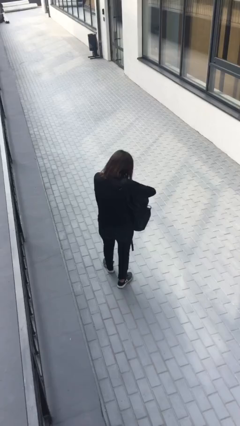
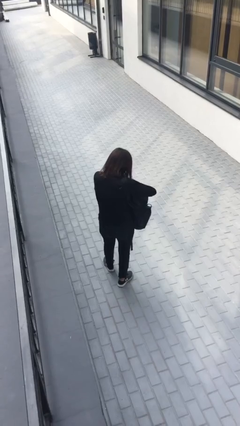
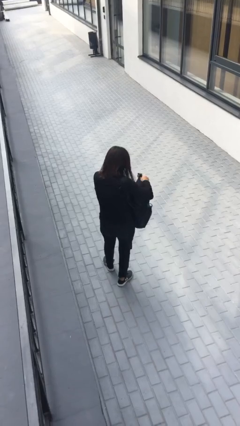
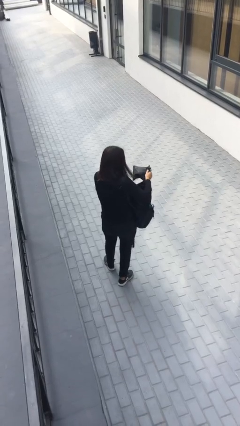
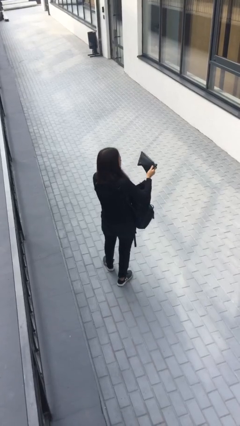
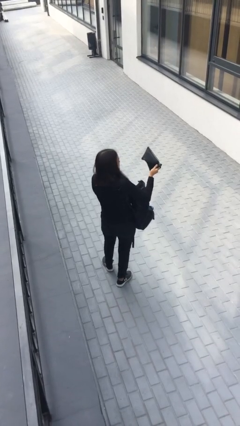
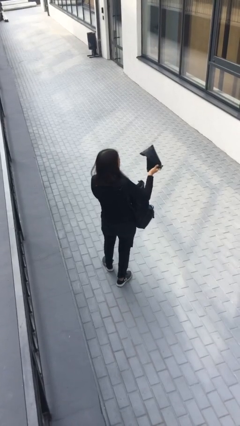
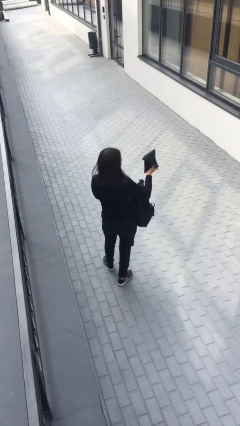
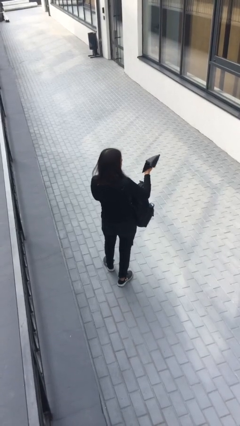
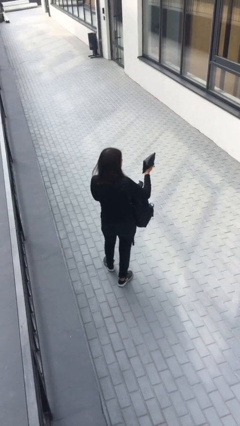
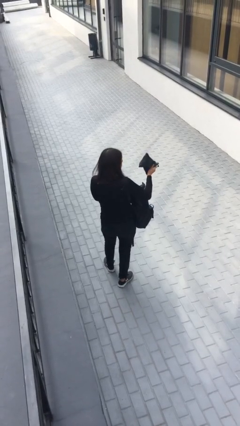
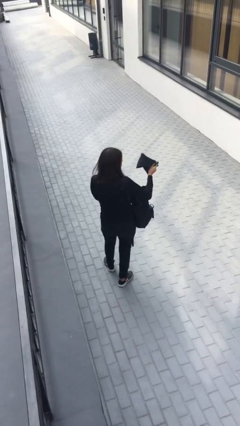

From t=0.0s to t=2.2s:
person takes object from backpack

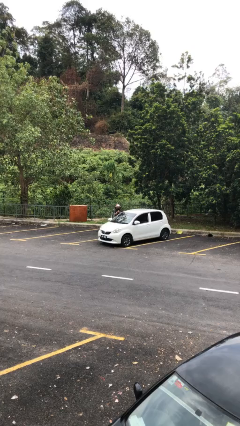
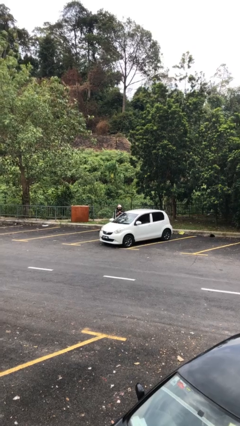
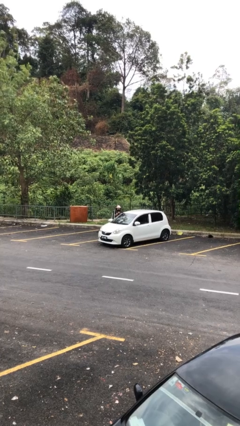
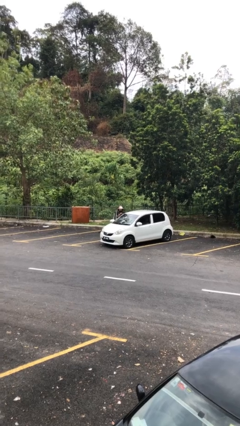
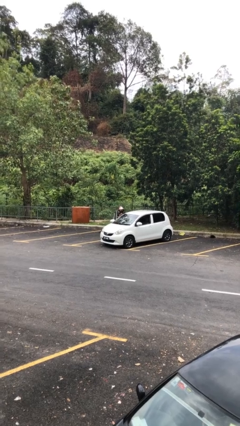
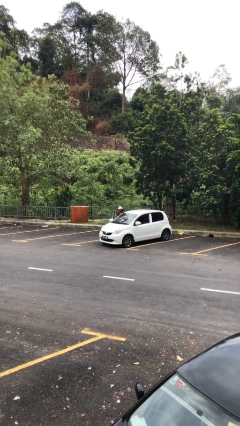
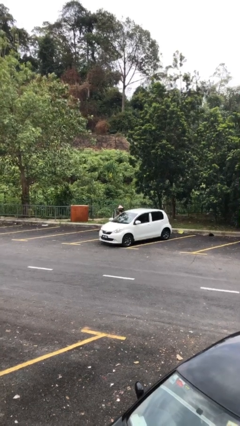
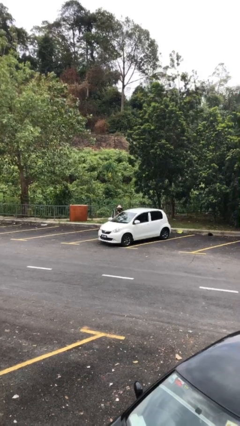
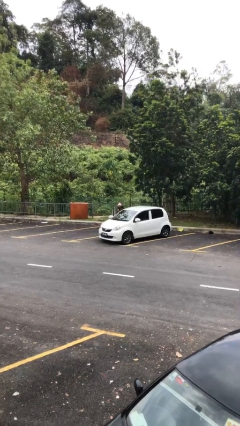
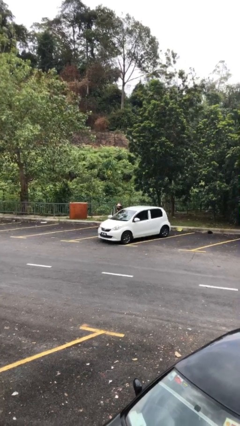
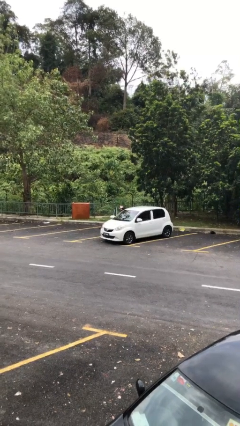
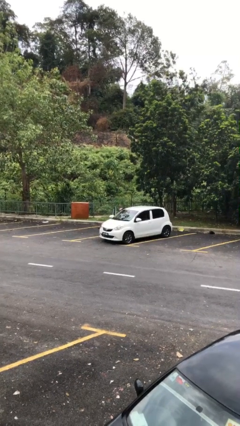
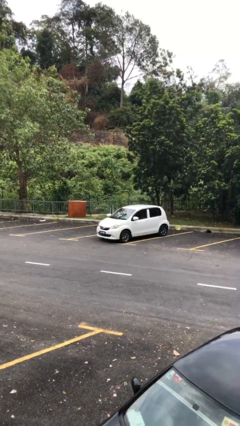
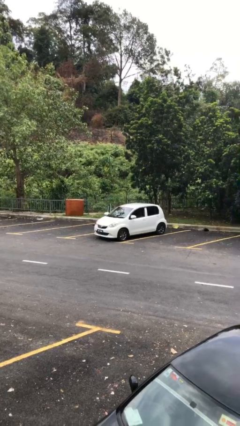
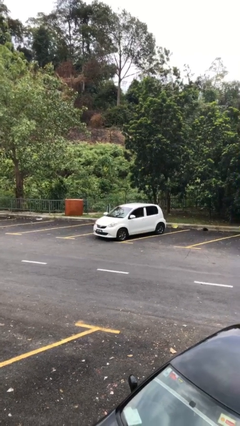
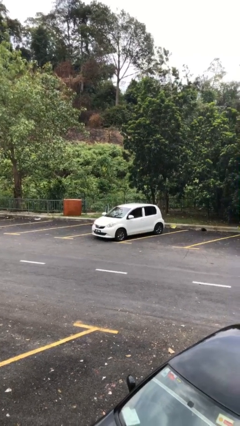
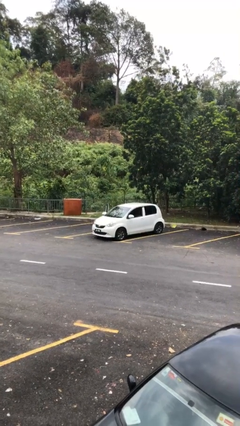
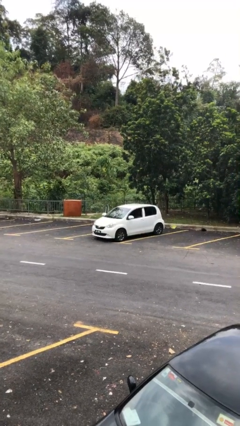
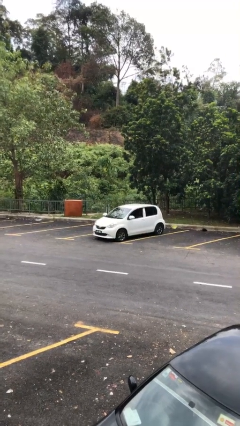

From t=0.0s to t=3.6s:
person enters car

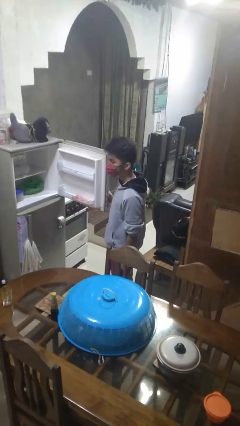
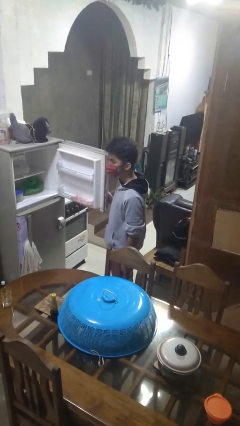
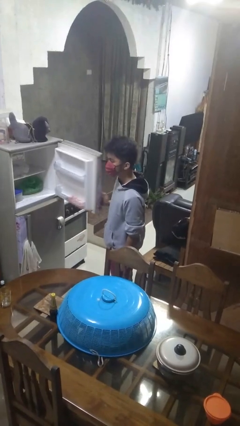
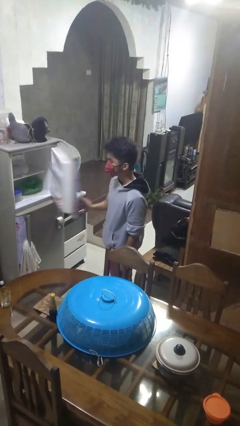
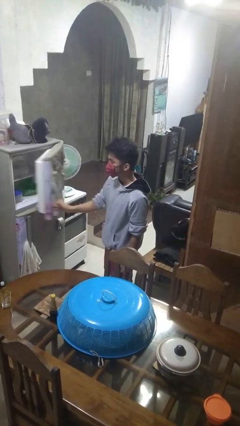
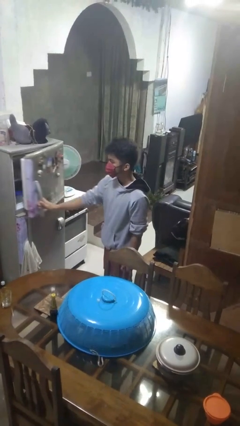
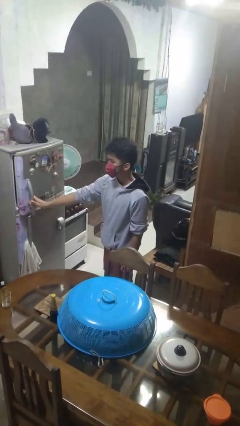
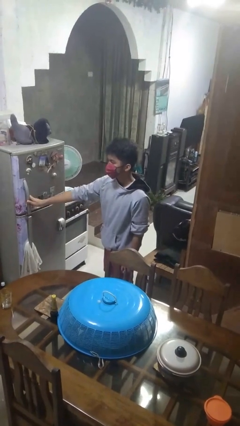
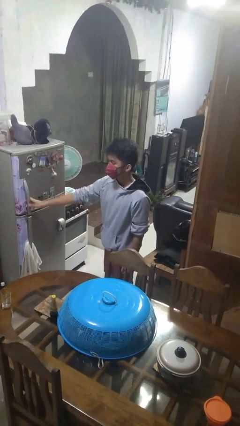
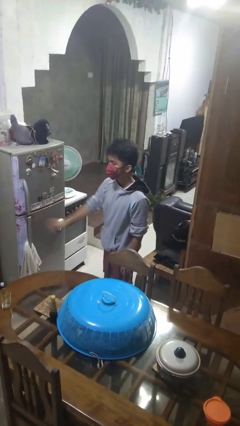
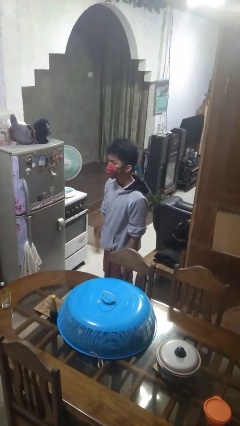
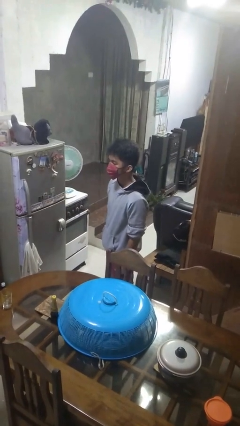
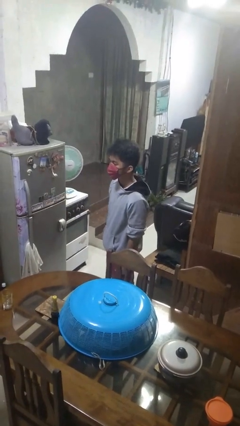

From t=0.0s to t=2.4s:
person closes refrigerator

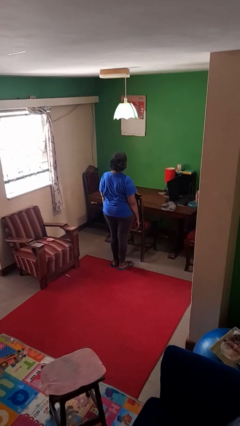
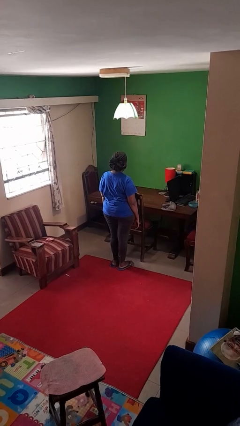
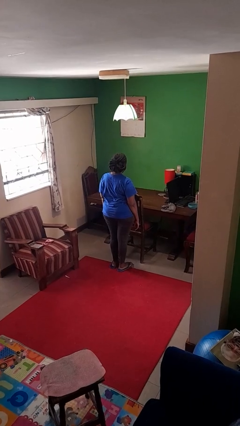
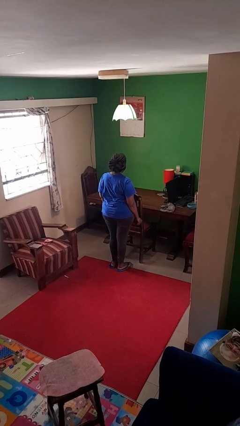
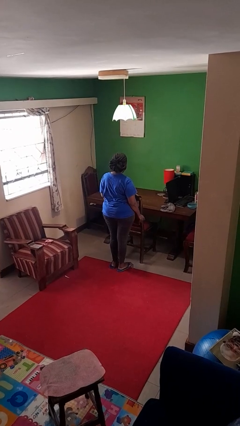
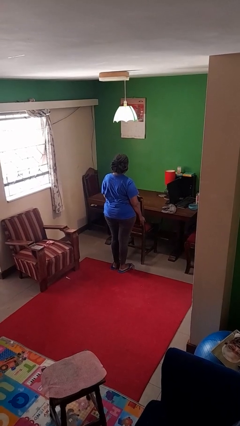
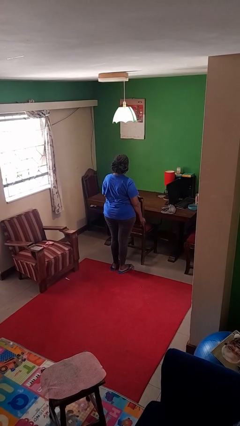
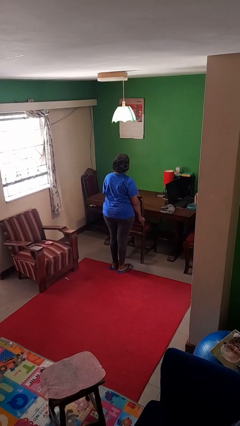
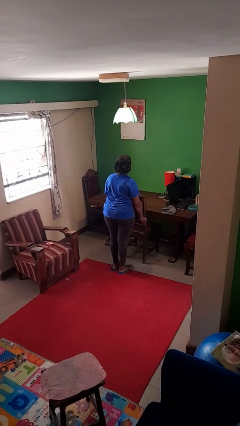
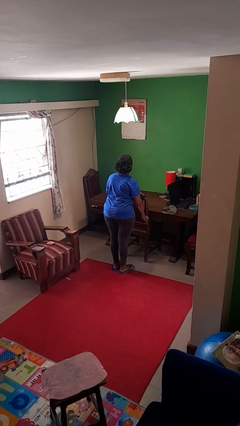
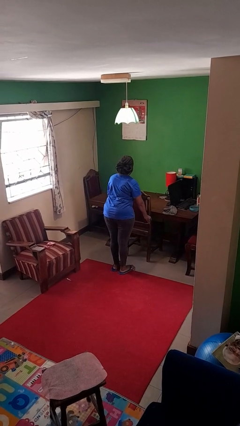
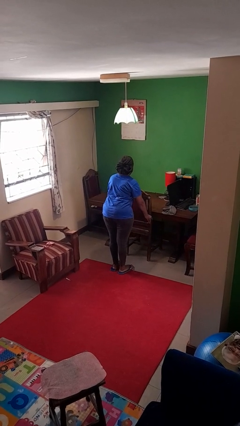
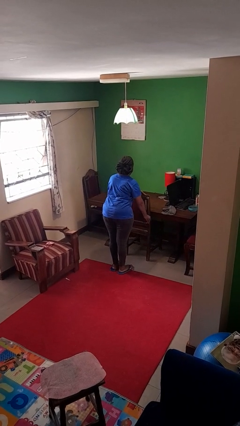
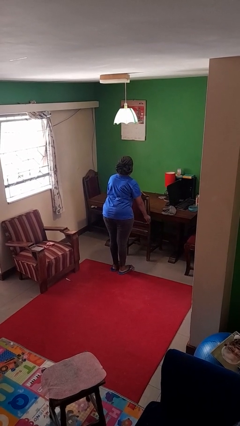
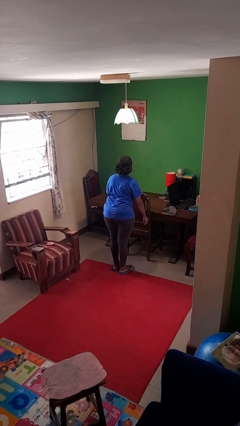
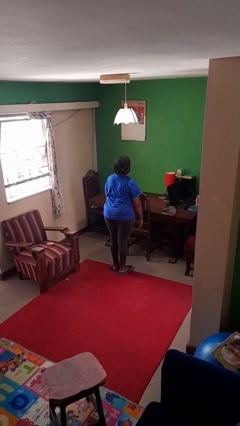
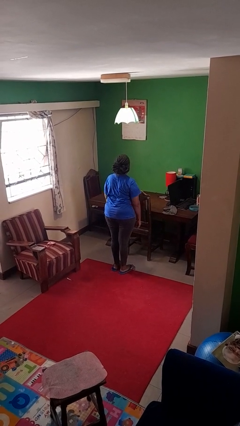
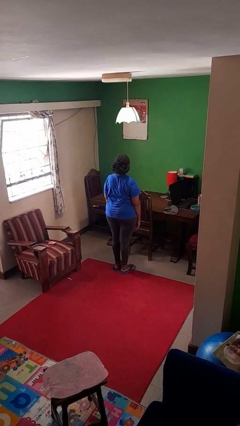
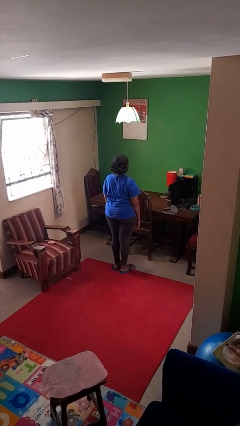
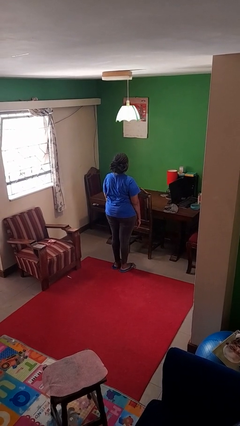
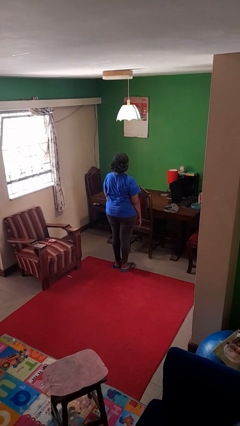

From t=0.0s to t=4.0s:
person pushes in chair

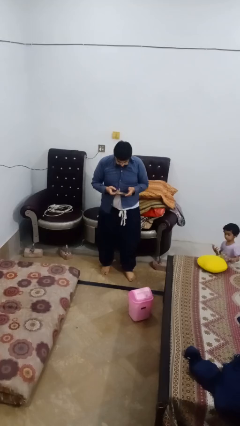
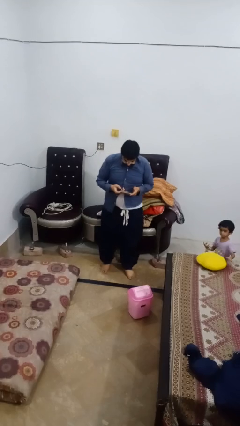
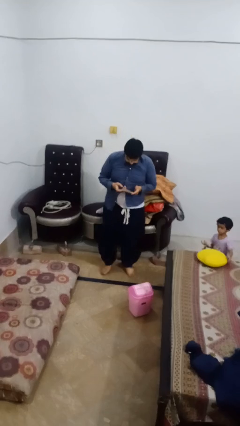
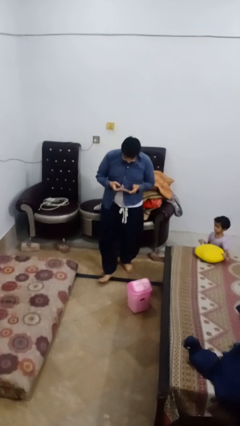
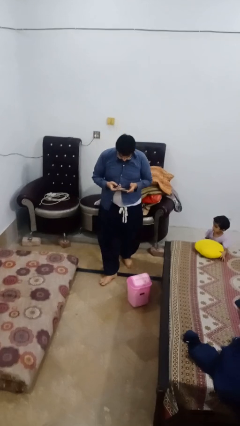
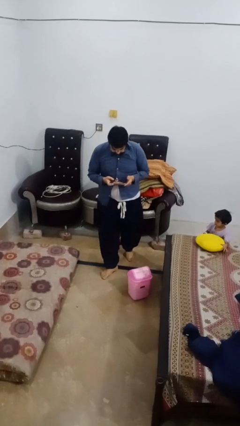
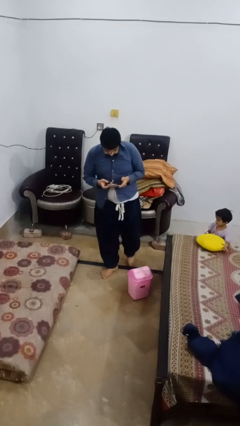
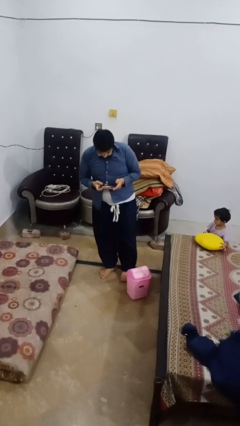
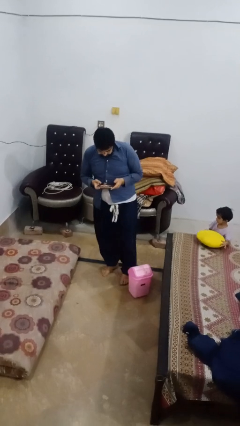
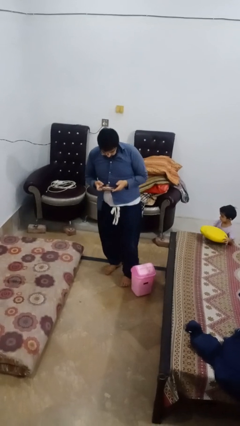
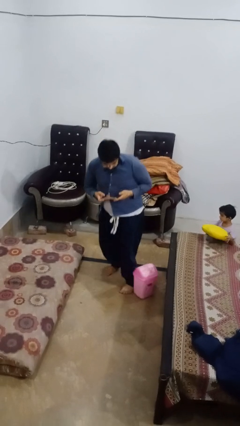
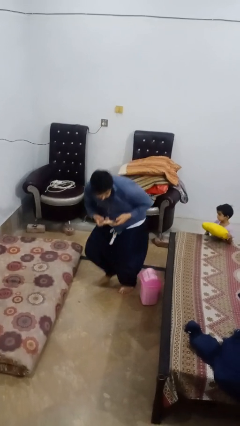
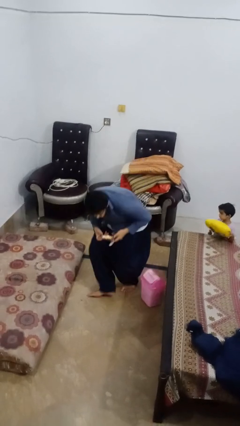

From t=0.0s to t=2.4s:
person trips on object on floor

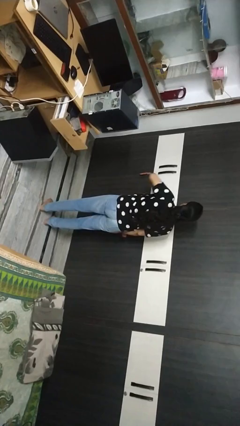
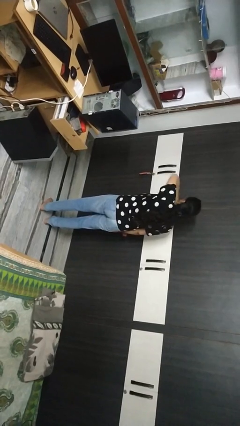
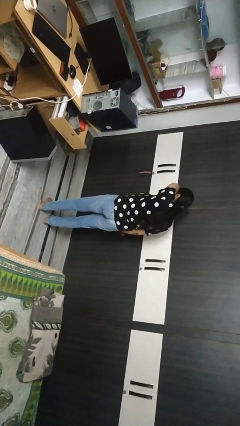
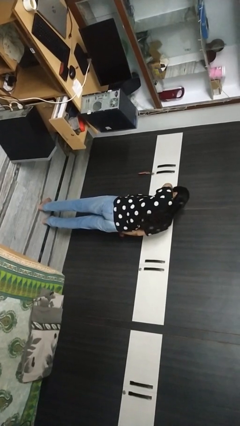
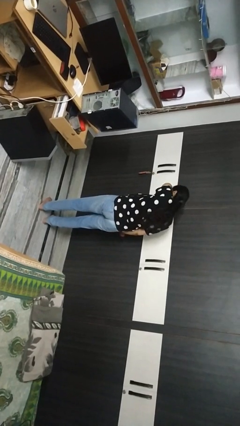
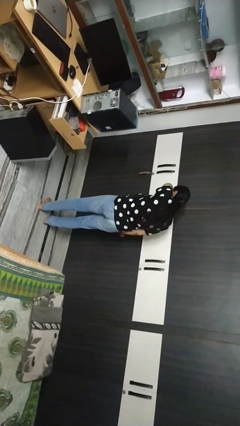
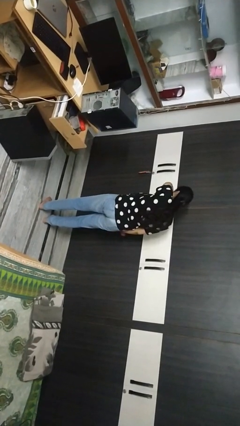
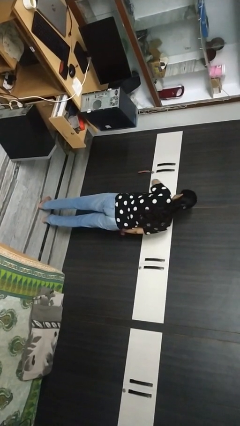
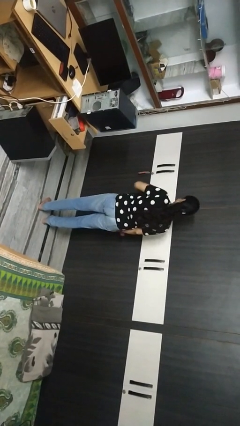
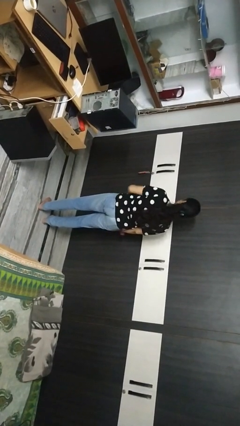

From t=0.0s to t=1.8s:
person sneezes into arm

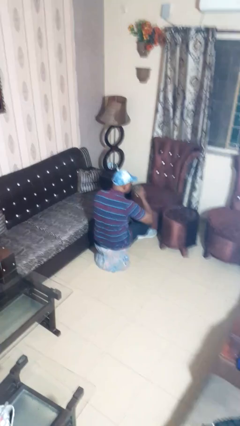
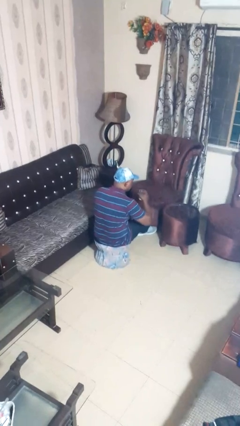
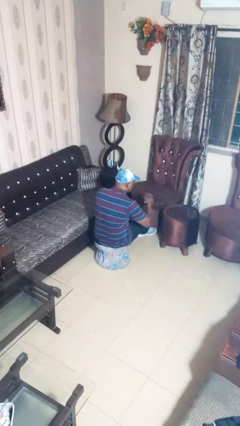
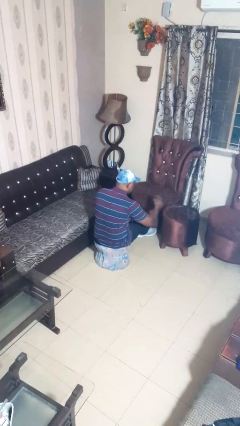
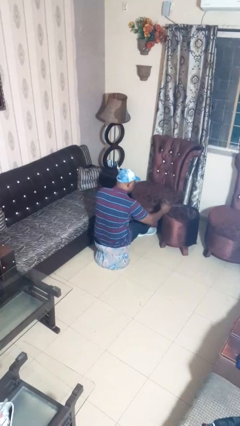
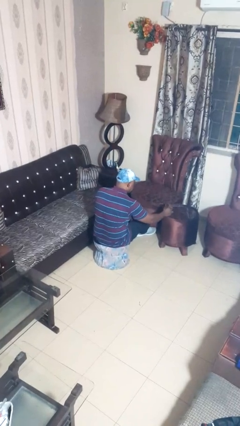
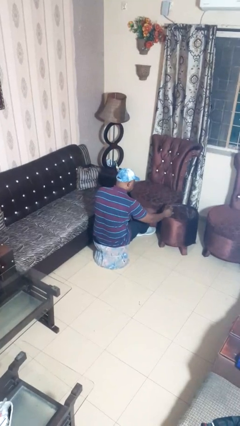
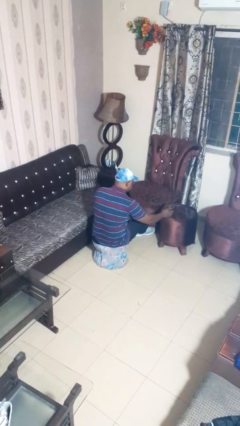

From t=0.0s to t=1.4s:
person puts down object on table
